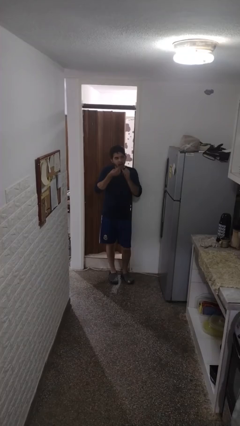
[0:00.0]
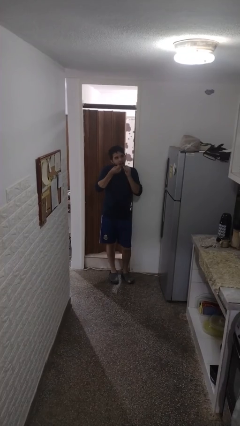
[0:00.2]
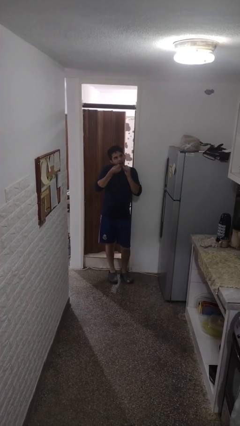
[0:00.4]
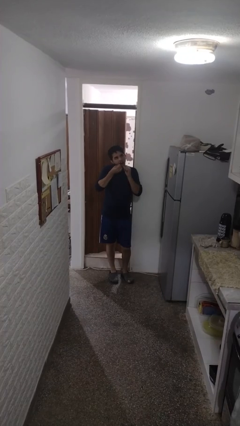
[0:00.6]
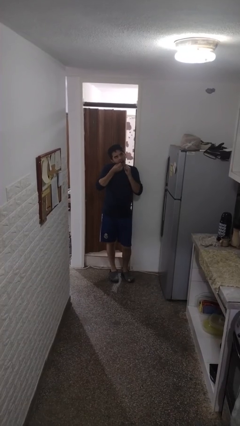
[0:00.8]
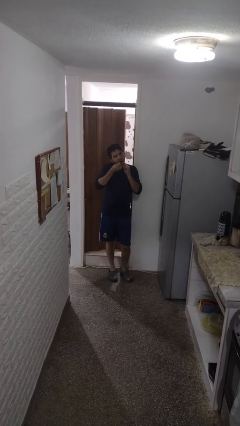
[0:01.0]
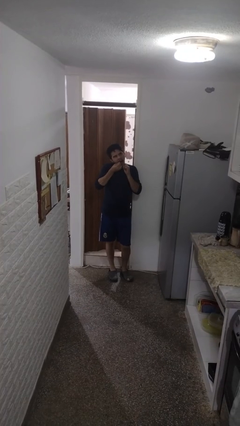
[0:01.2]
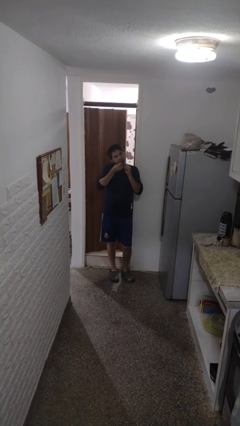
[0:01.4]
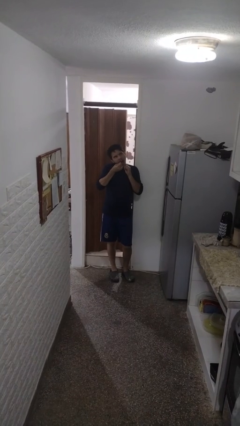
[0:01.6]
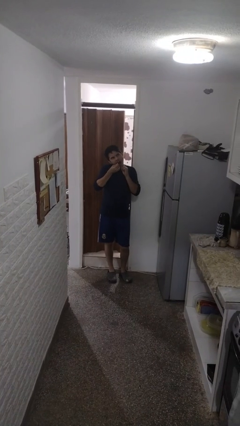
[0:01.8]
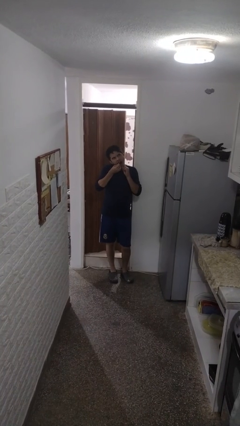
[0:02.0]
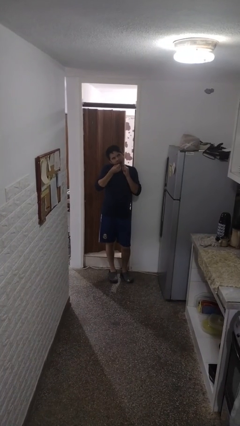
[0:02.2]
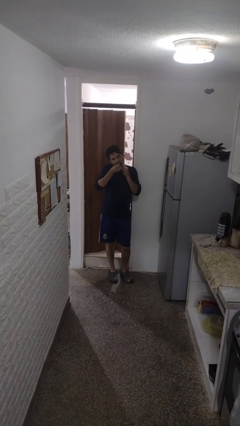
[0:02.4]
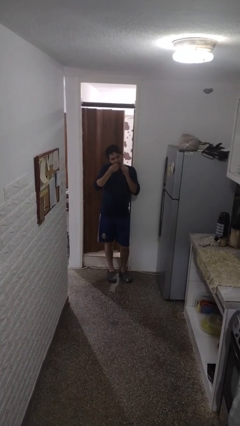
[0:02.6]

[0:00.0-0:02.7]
person flosses

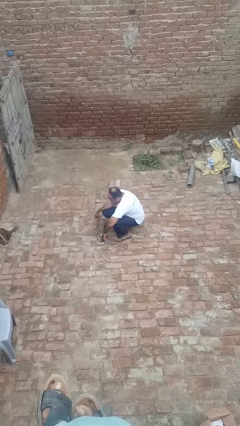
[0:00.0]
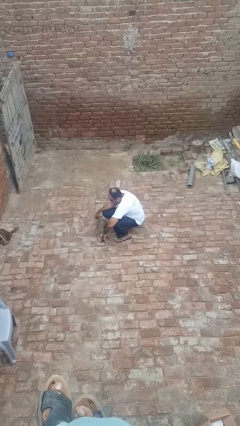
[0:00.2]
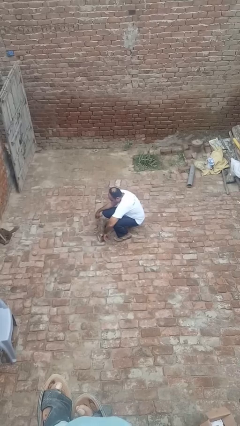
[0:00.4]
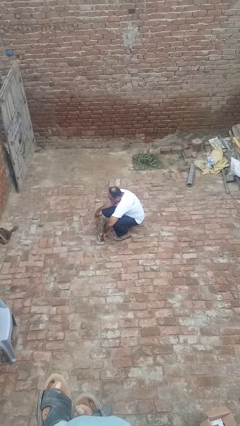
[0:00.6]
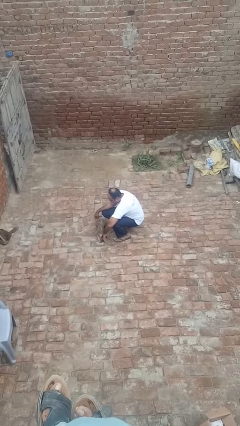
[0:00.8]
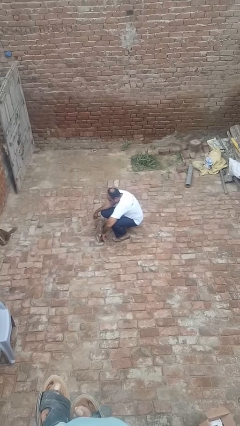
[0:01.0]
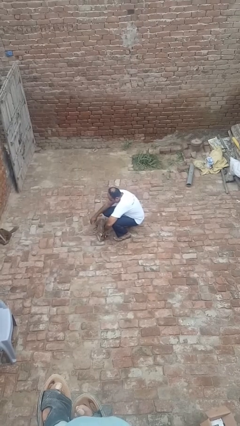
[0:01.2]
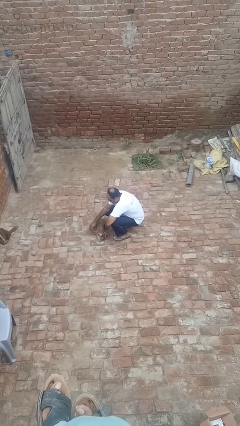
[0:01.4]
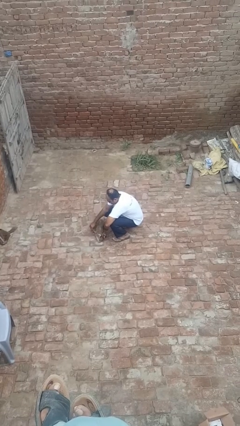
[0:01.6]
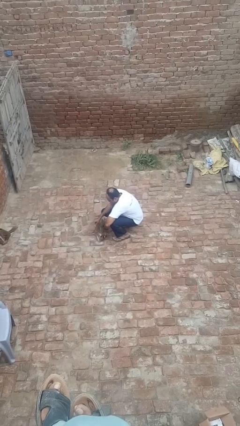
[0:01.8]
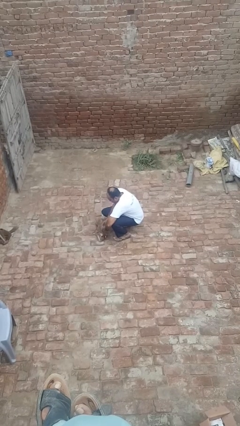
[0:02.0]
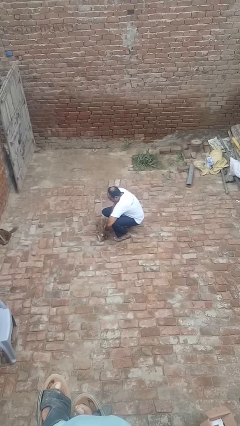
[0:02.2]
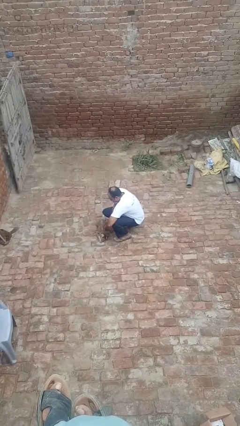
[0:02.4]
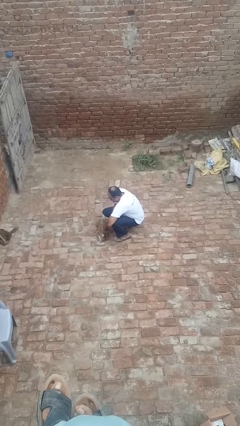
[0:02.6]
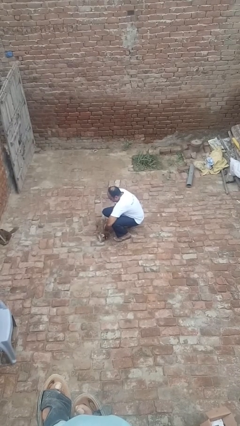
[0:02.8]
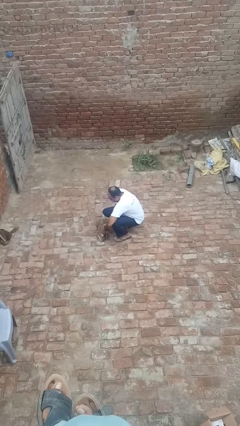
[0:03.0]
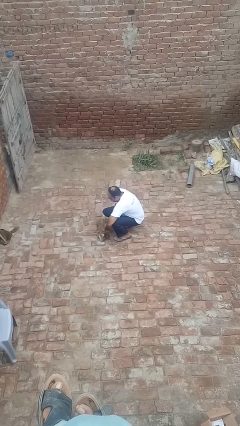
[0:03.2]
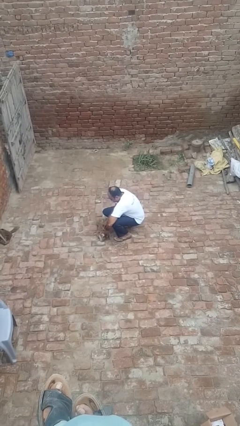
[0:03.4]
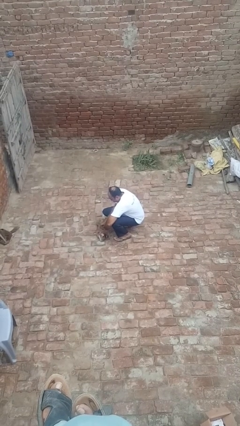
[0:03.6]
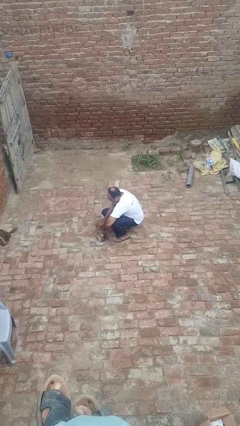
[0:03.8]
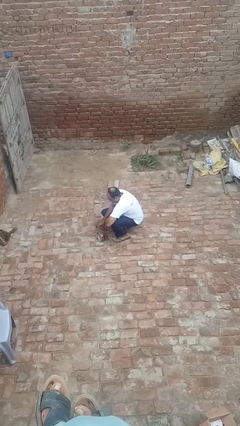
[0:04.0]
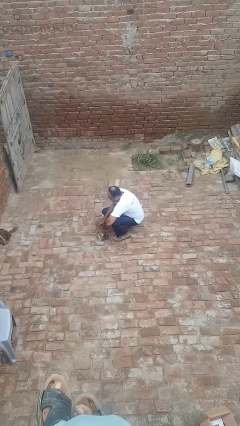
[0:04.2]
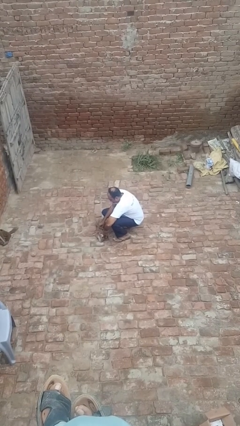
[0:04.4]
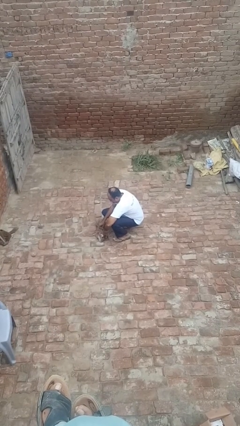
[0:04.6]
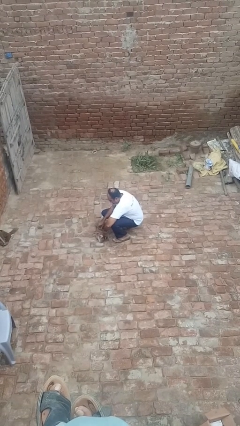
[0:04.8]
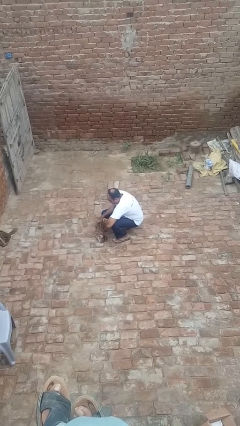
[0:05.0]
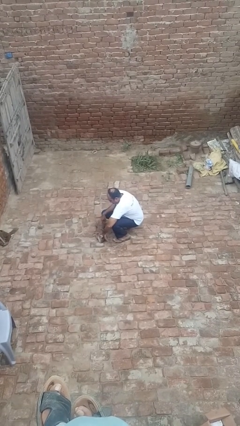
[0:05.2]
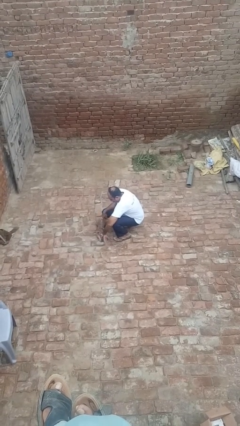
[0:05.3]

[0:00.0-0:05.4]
person attaches leash to dog

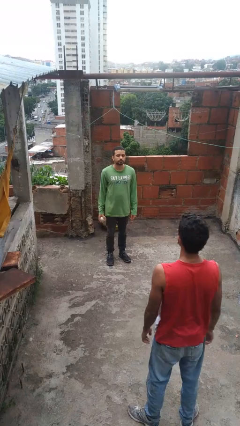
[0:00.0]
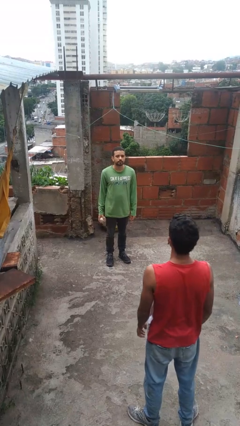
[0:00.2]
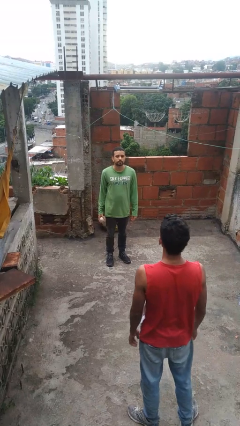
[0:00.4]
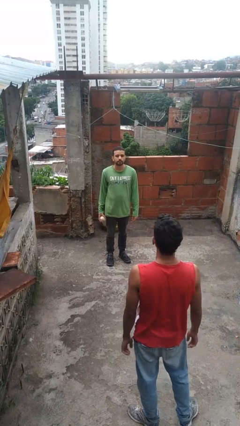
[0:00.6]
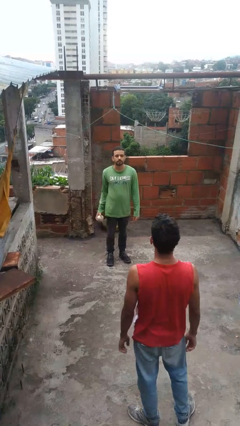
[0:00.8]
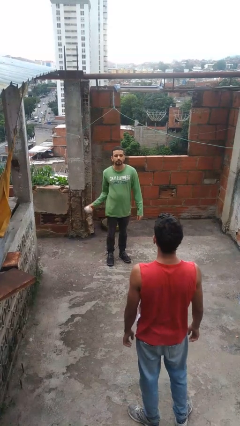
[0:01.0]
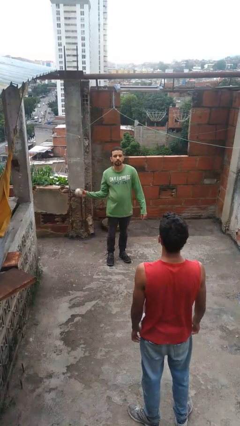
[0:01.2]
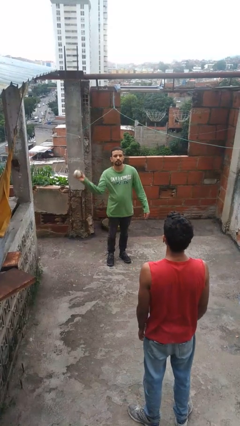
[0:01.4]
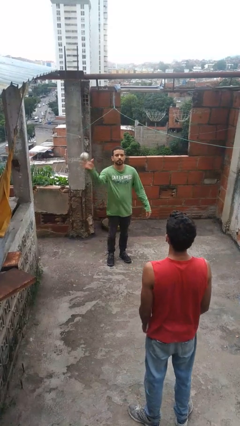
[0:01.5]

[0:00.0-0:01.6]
person throws object to person

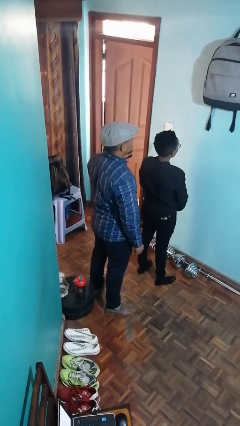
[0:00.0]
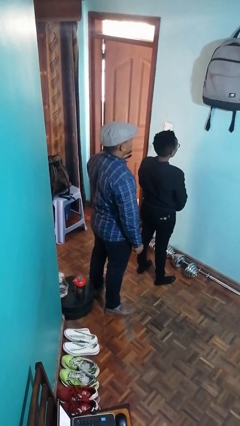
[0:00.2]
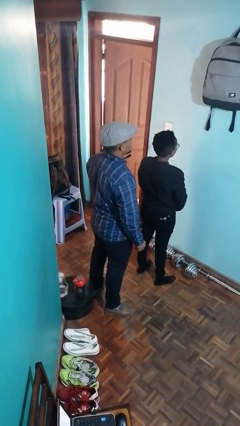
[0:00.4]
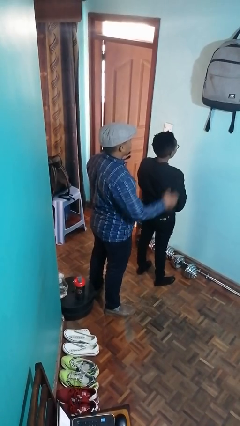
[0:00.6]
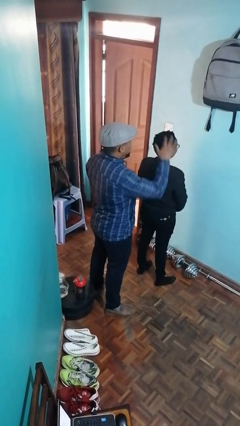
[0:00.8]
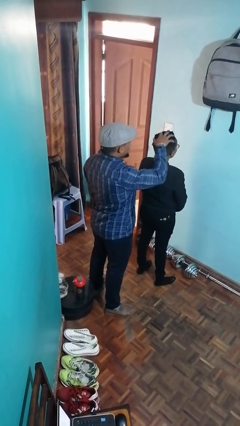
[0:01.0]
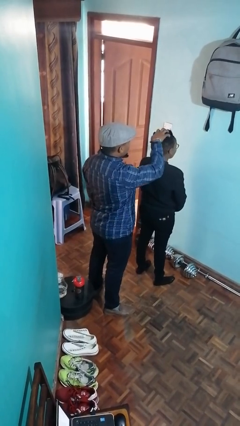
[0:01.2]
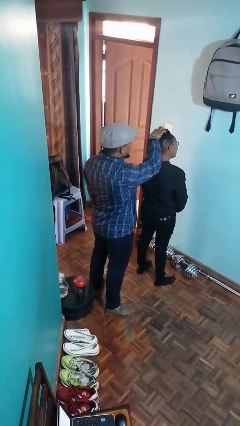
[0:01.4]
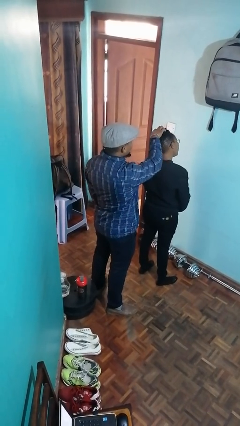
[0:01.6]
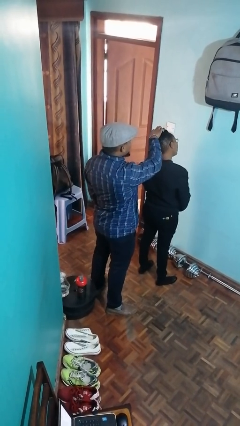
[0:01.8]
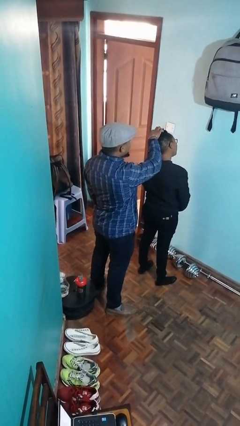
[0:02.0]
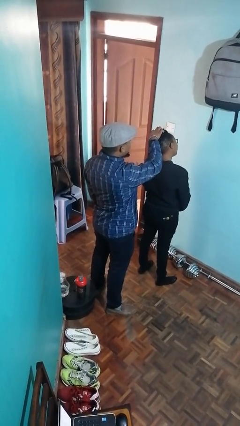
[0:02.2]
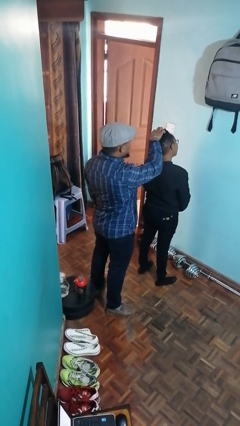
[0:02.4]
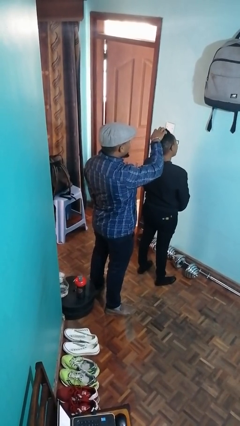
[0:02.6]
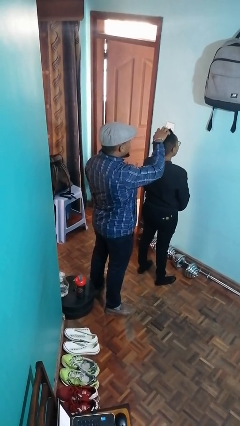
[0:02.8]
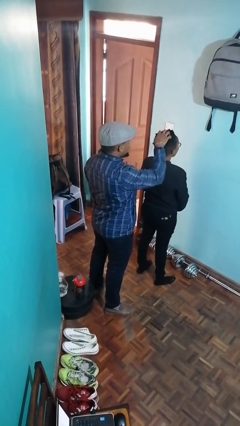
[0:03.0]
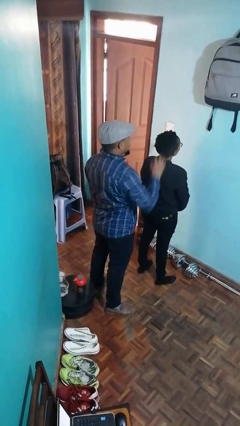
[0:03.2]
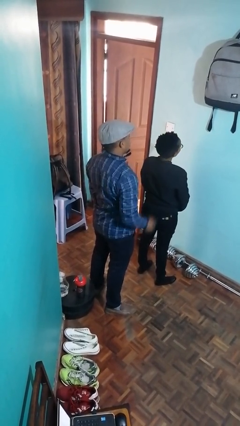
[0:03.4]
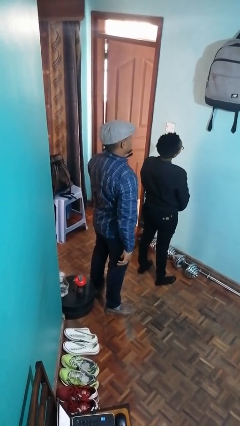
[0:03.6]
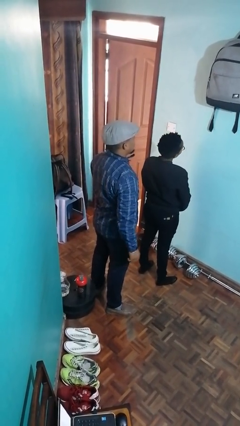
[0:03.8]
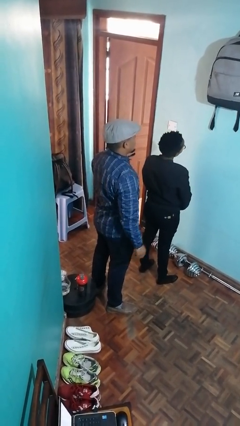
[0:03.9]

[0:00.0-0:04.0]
person grabs person by hair

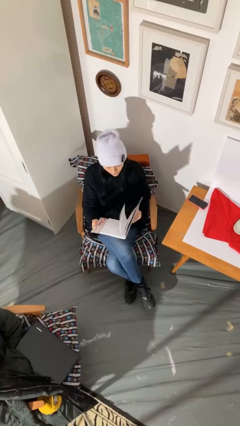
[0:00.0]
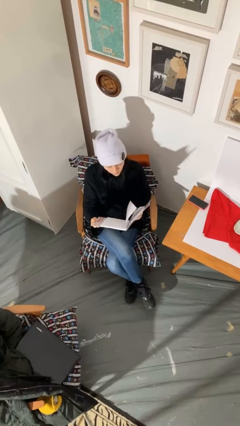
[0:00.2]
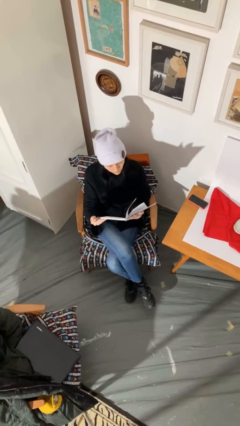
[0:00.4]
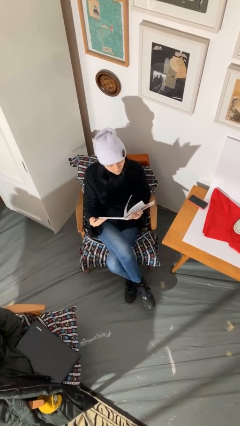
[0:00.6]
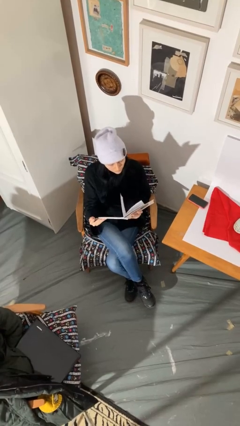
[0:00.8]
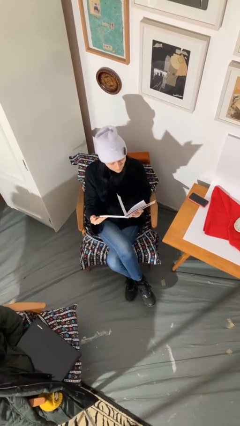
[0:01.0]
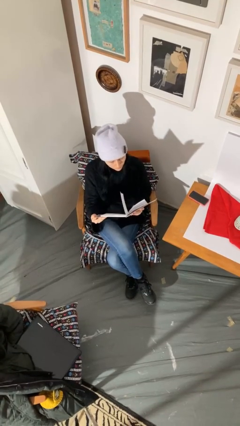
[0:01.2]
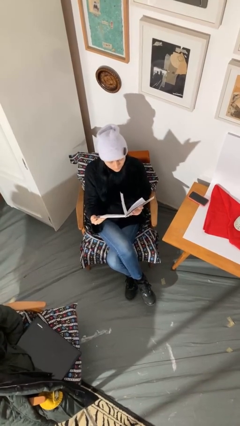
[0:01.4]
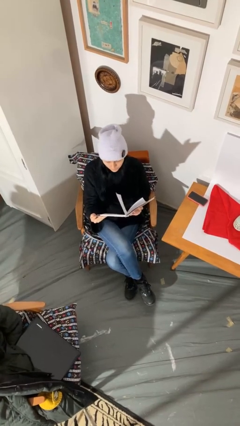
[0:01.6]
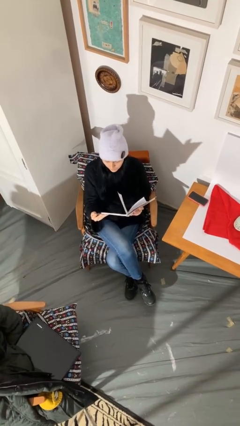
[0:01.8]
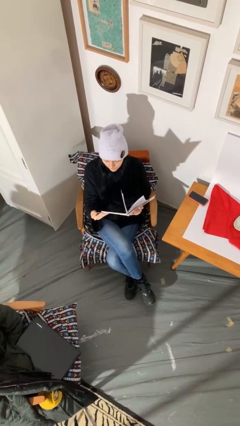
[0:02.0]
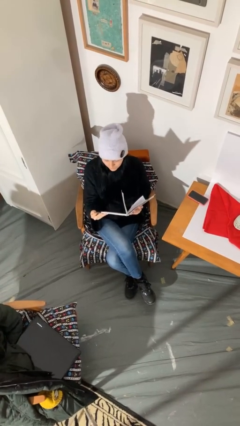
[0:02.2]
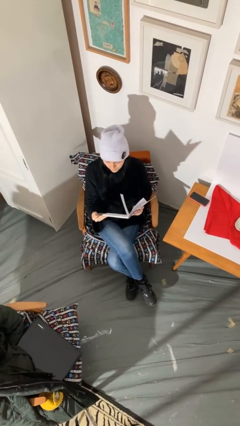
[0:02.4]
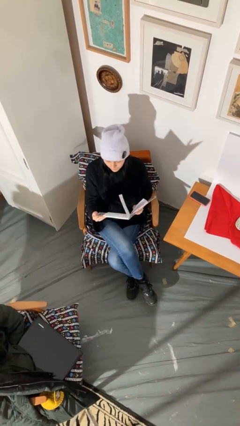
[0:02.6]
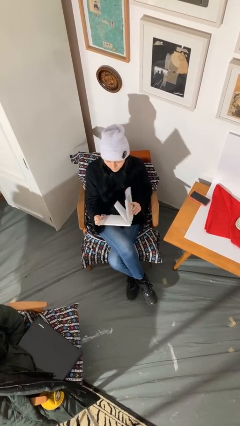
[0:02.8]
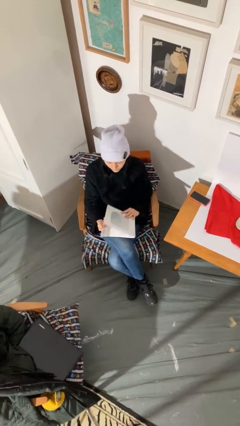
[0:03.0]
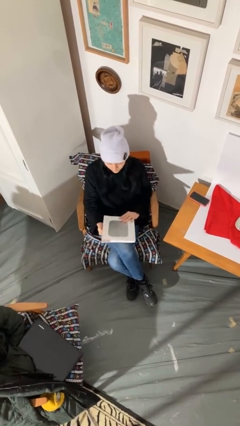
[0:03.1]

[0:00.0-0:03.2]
person reads document

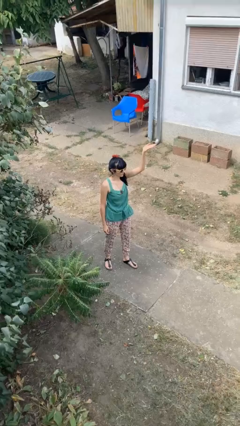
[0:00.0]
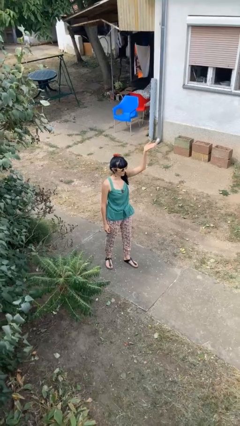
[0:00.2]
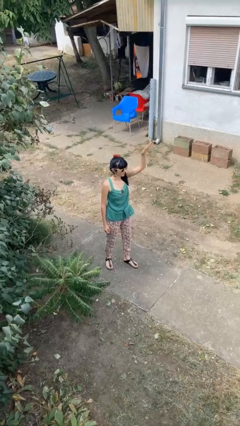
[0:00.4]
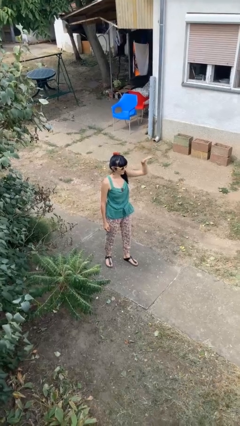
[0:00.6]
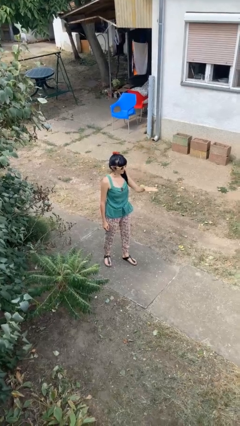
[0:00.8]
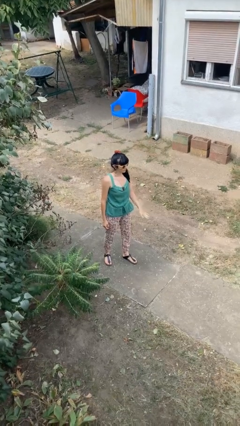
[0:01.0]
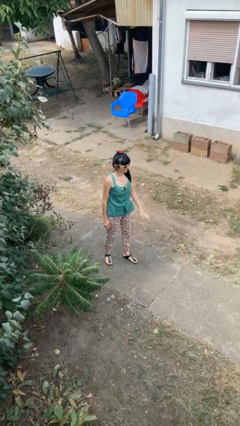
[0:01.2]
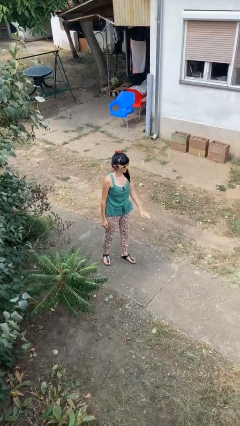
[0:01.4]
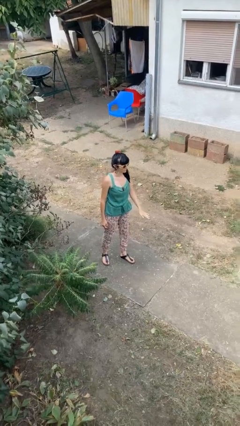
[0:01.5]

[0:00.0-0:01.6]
person gestures swipe down
